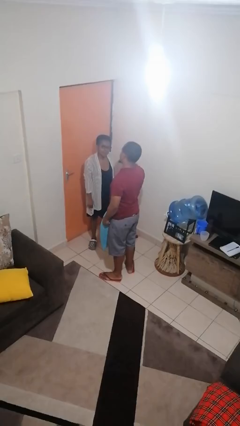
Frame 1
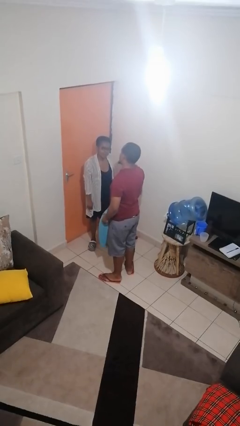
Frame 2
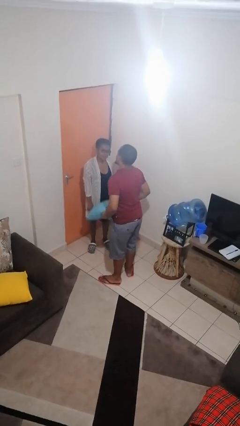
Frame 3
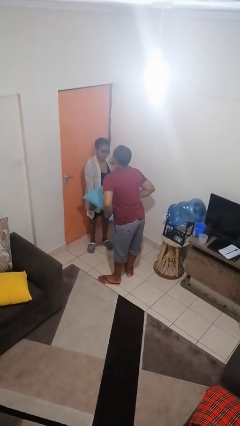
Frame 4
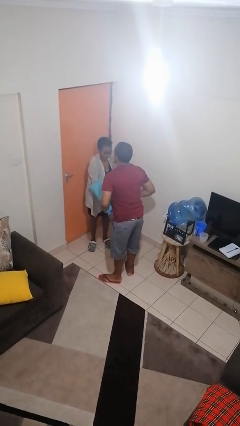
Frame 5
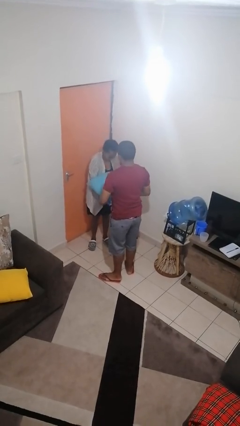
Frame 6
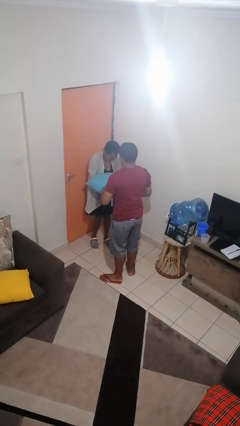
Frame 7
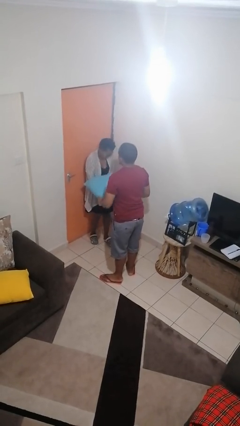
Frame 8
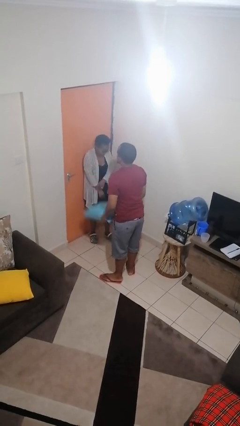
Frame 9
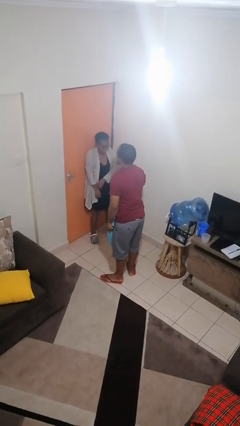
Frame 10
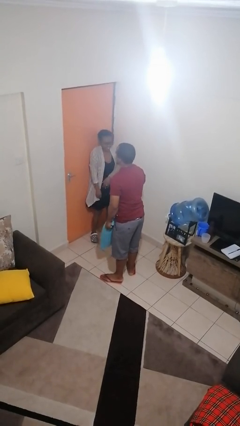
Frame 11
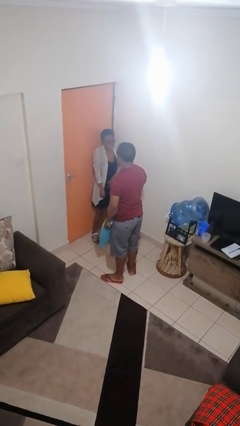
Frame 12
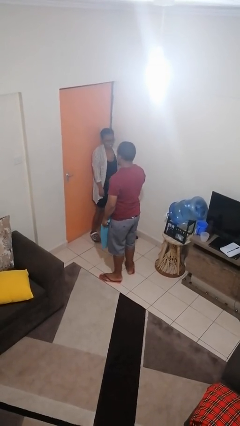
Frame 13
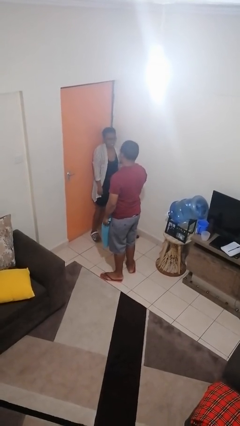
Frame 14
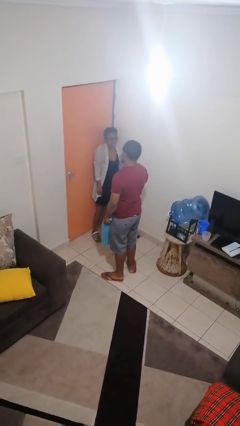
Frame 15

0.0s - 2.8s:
person hits person with pillow

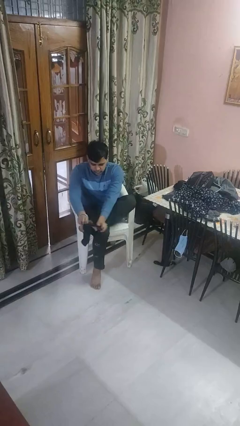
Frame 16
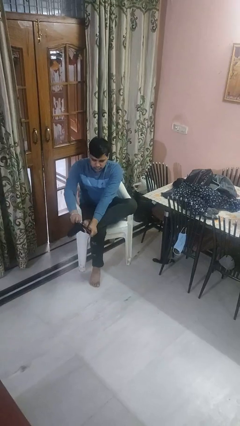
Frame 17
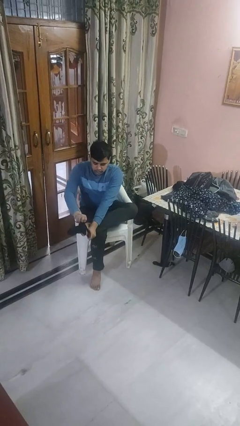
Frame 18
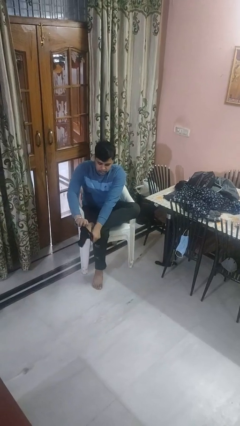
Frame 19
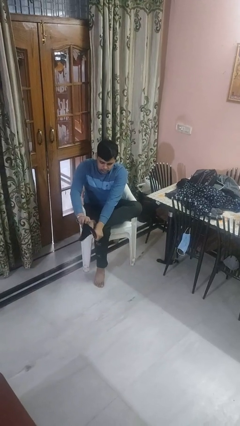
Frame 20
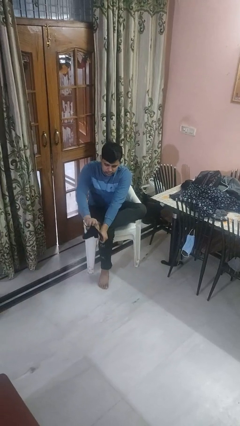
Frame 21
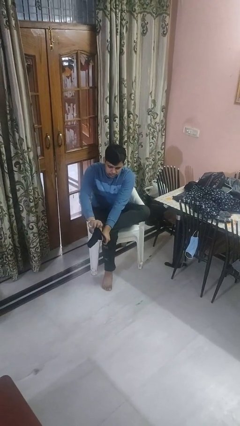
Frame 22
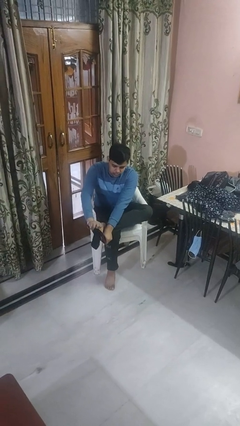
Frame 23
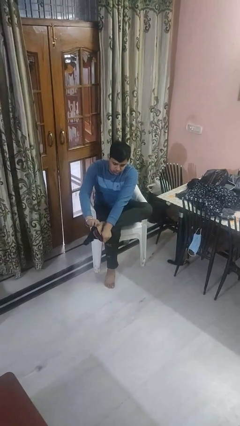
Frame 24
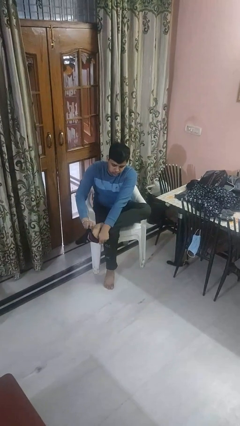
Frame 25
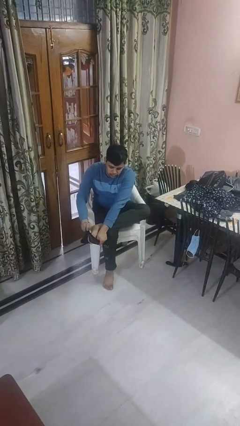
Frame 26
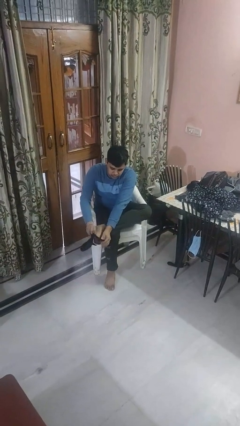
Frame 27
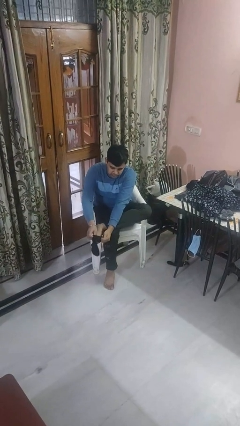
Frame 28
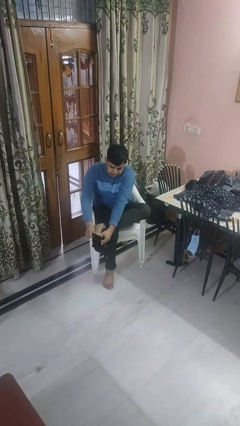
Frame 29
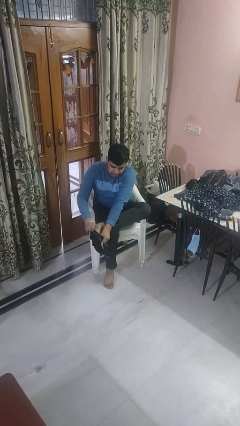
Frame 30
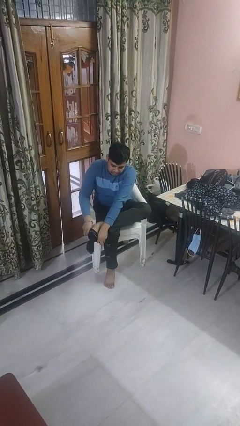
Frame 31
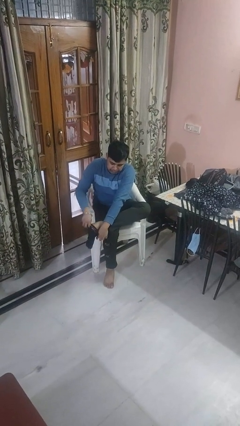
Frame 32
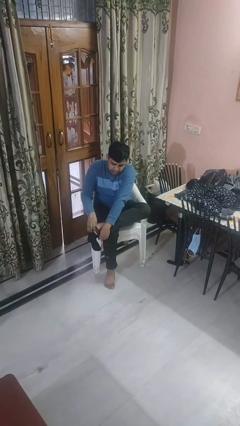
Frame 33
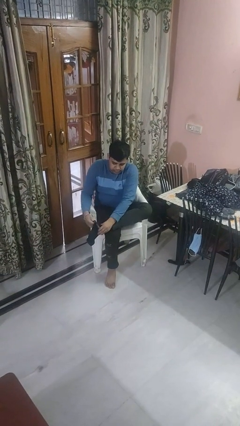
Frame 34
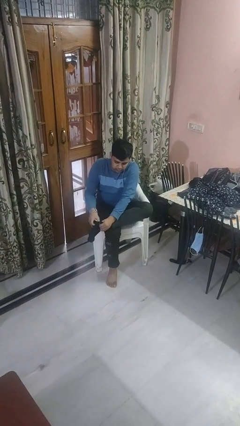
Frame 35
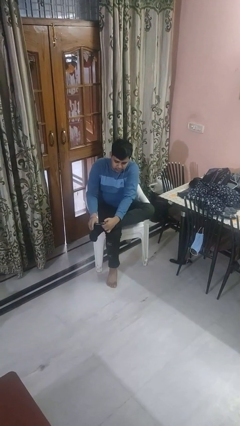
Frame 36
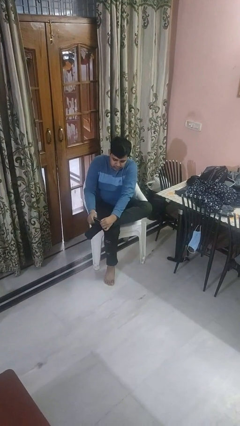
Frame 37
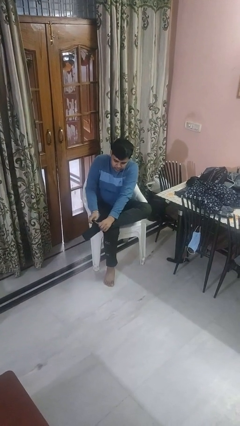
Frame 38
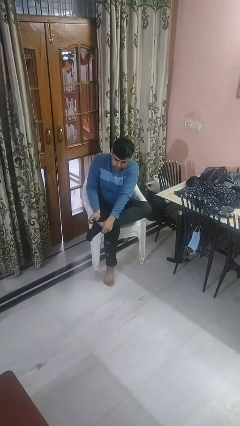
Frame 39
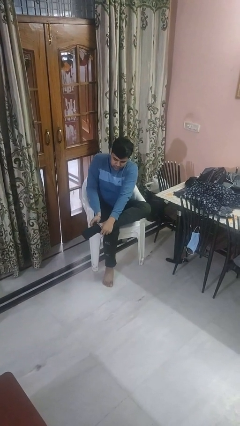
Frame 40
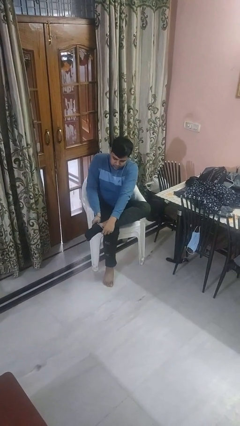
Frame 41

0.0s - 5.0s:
person puts on socks

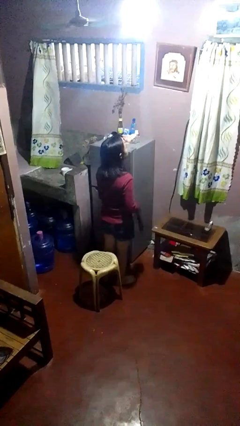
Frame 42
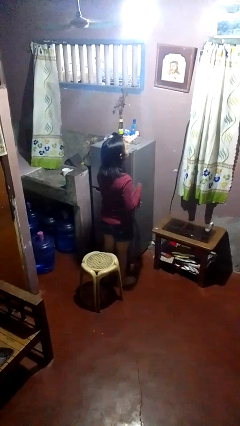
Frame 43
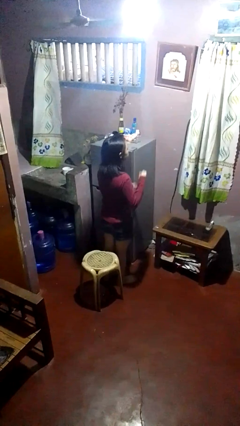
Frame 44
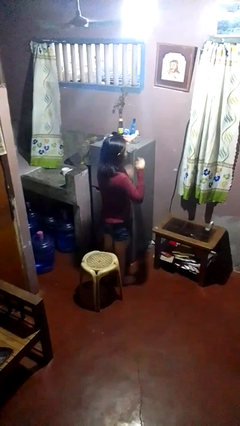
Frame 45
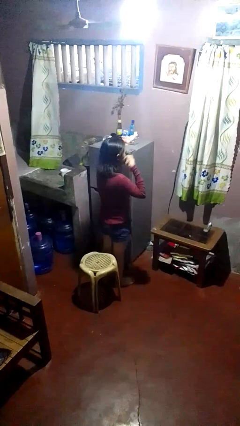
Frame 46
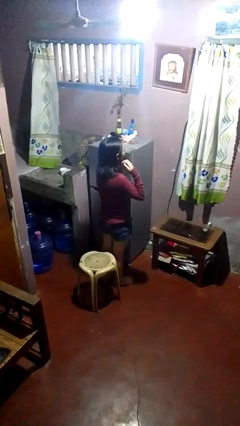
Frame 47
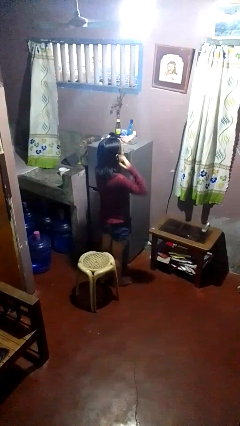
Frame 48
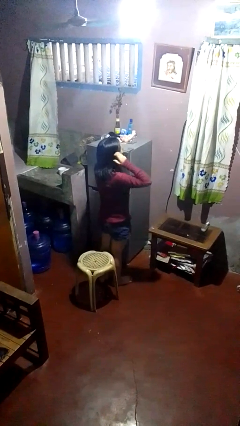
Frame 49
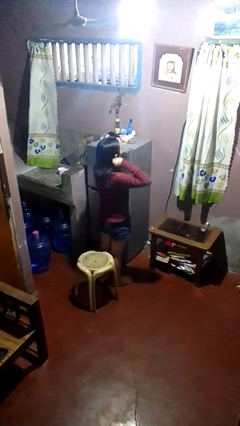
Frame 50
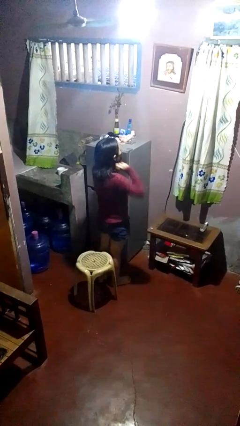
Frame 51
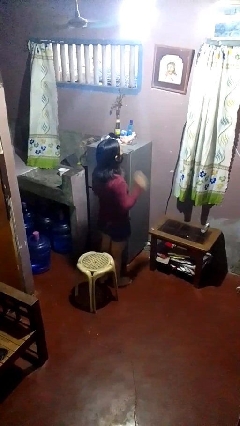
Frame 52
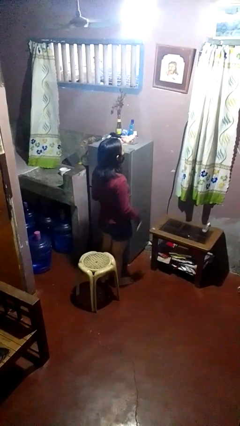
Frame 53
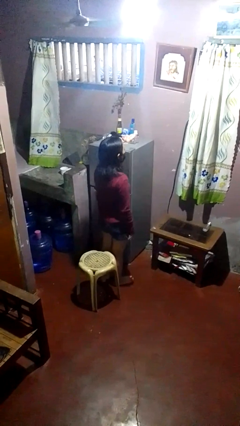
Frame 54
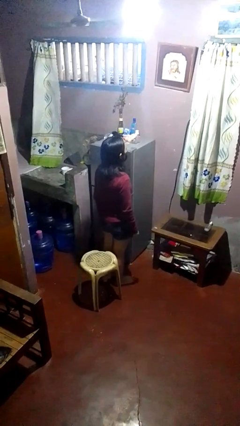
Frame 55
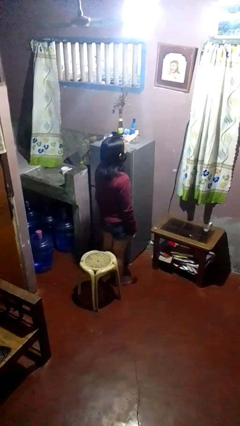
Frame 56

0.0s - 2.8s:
person puts on facemask

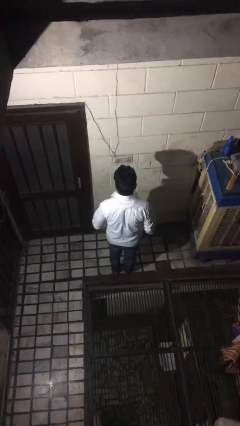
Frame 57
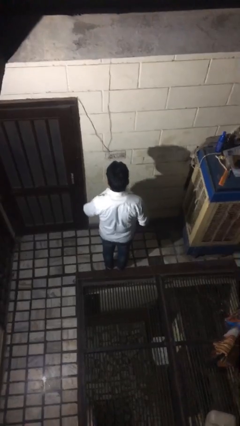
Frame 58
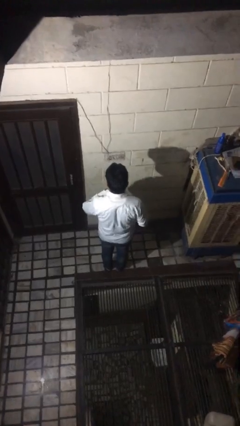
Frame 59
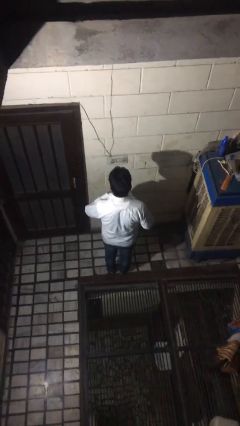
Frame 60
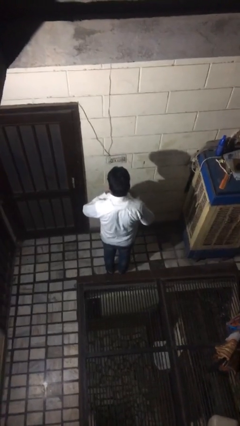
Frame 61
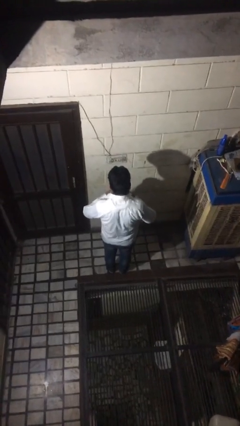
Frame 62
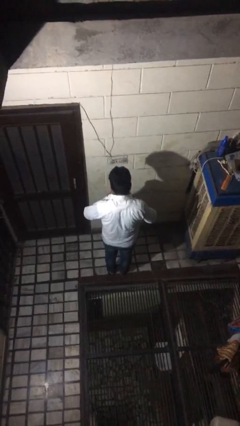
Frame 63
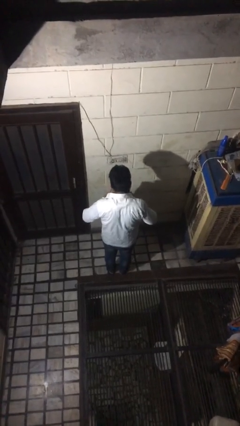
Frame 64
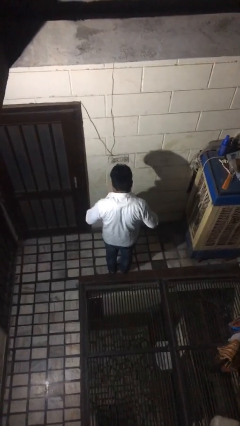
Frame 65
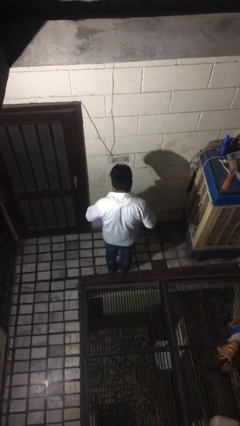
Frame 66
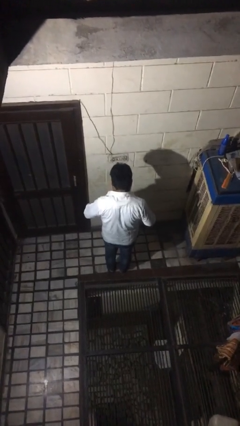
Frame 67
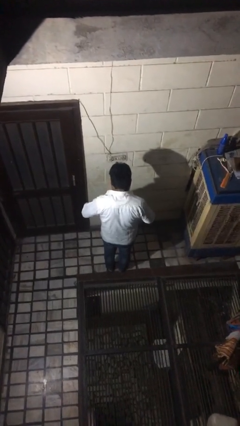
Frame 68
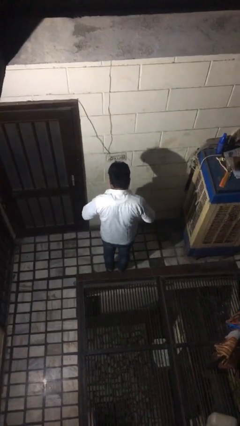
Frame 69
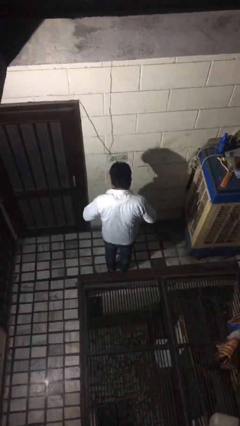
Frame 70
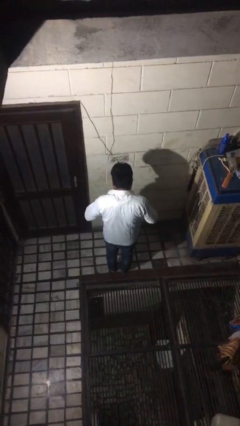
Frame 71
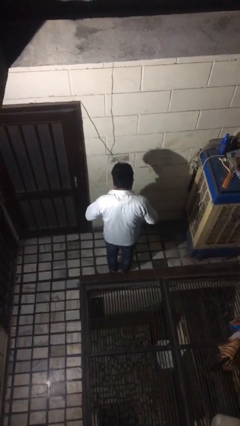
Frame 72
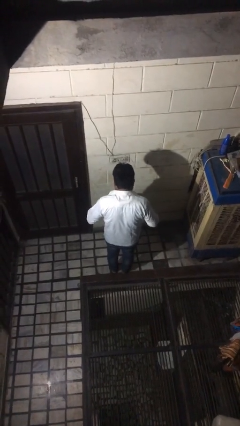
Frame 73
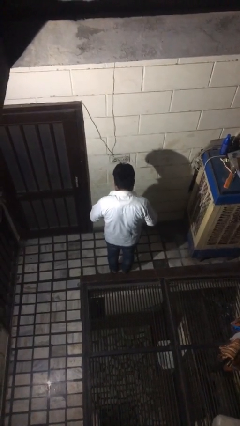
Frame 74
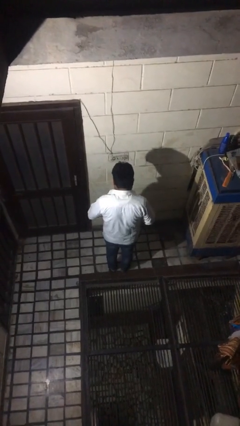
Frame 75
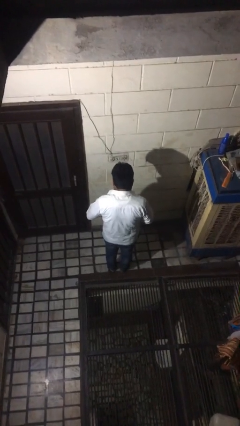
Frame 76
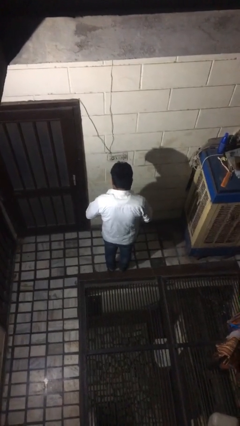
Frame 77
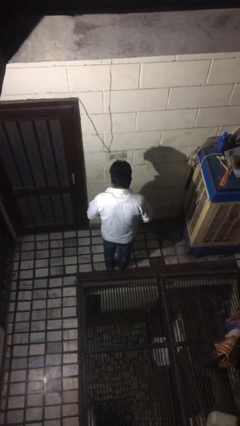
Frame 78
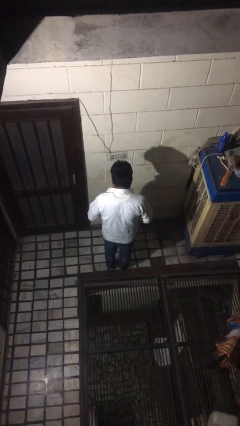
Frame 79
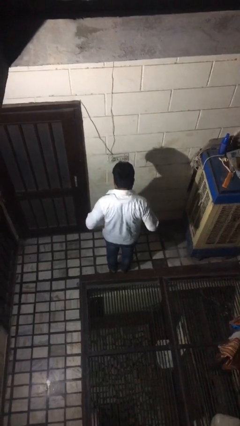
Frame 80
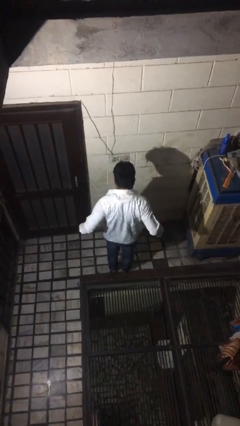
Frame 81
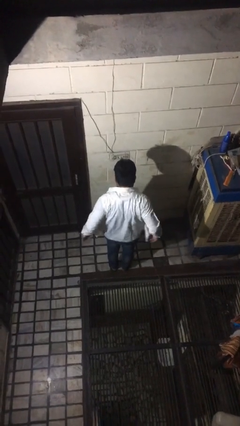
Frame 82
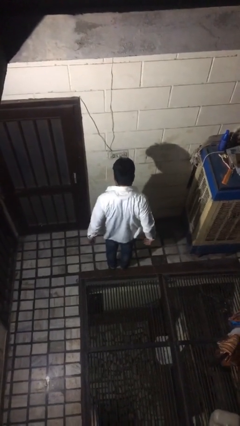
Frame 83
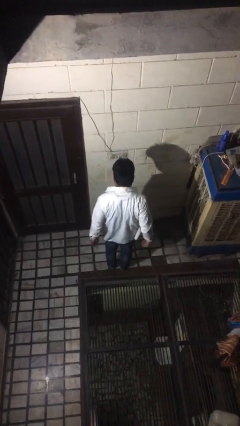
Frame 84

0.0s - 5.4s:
person unbuttons shirt

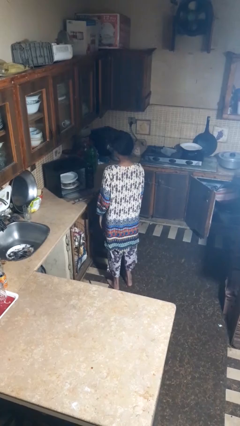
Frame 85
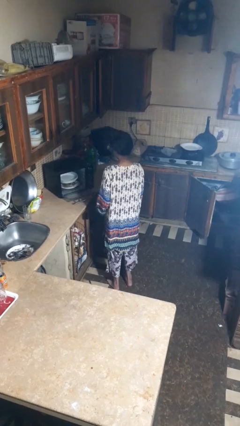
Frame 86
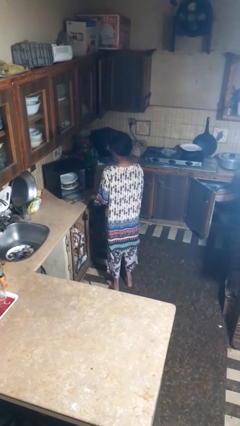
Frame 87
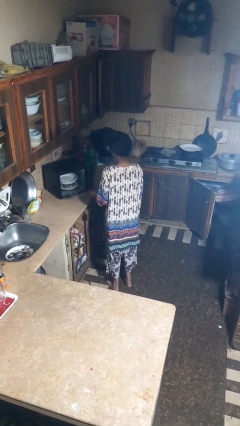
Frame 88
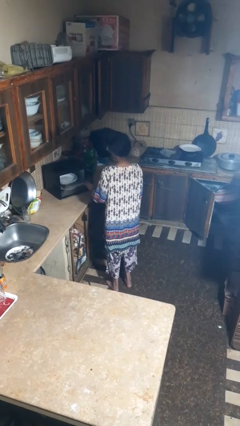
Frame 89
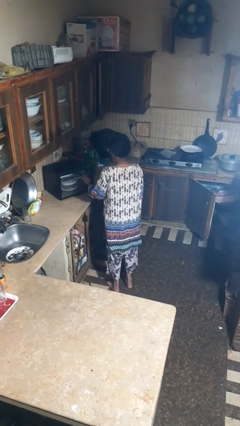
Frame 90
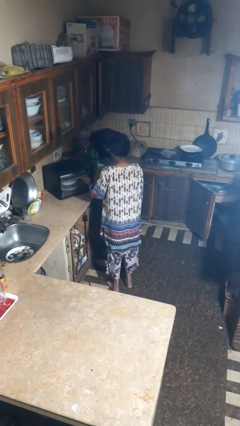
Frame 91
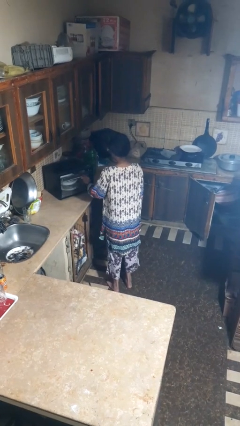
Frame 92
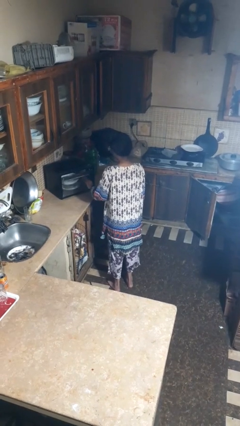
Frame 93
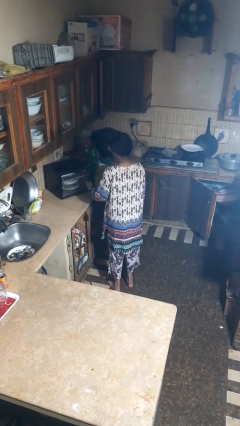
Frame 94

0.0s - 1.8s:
person closes dishwasher

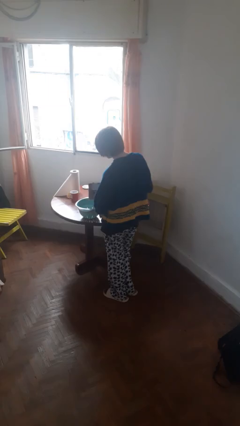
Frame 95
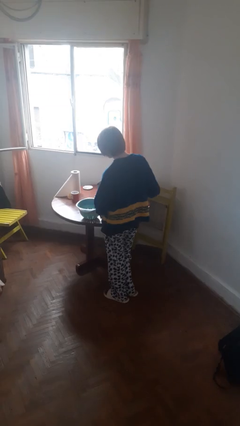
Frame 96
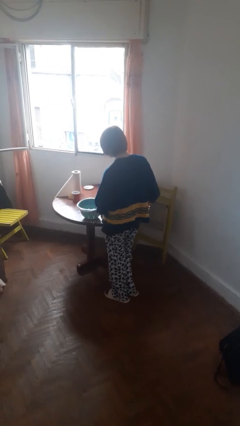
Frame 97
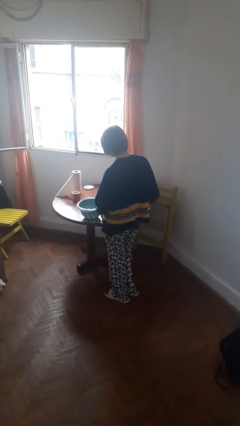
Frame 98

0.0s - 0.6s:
person pours into bowl
